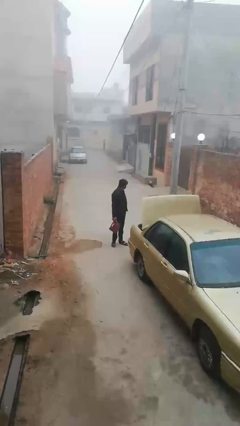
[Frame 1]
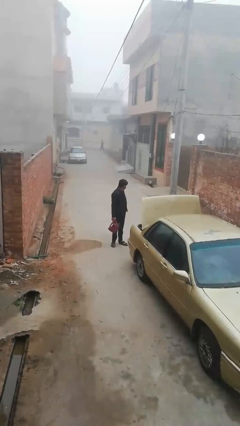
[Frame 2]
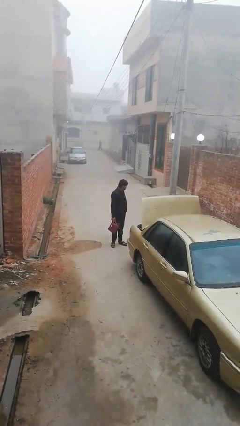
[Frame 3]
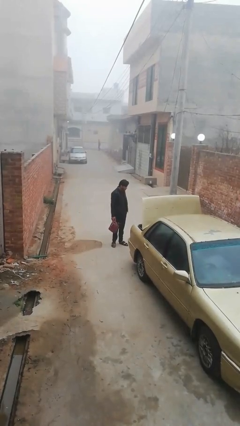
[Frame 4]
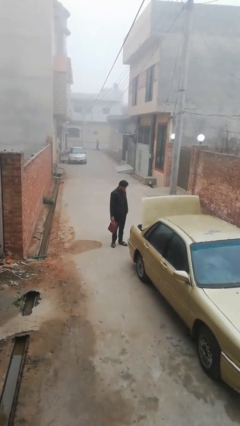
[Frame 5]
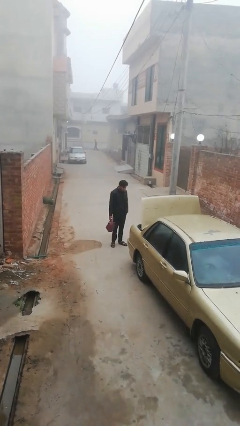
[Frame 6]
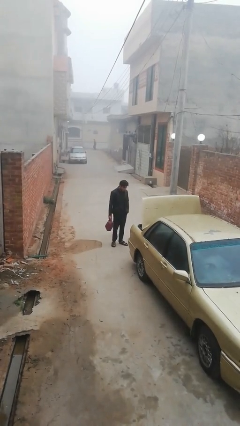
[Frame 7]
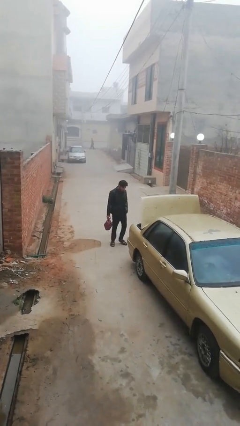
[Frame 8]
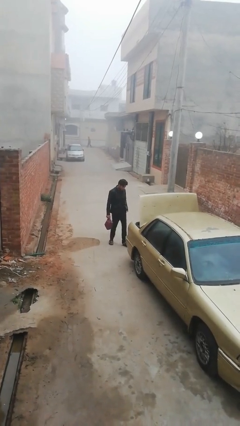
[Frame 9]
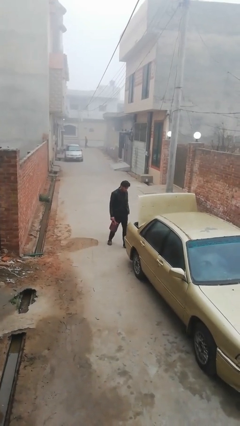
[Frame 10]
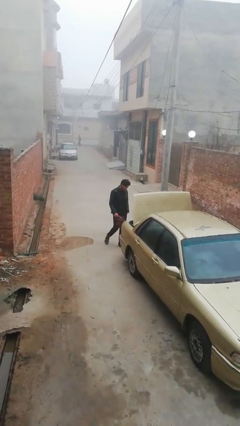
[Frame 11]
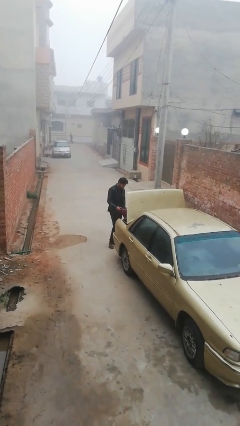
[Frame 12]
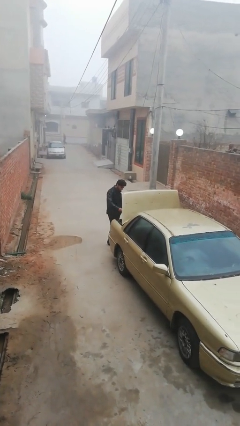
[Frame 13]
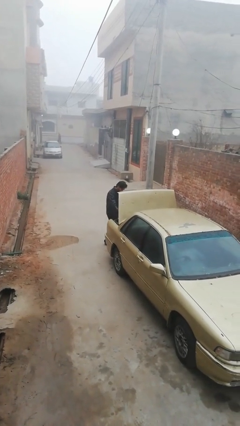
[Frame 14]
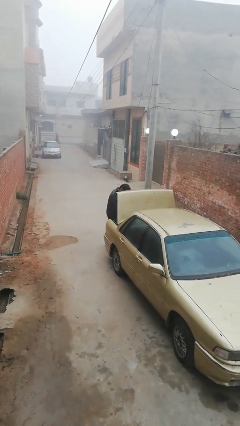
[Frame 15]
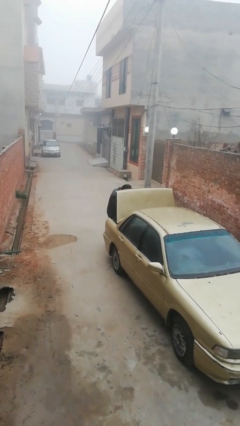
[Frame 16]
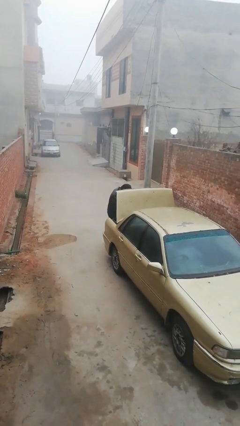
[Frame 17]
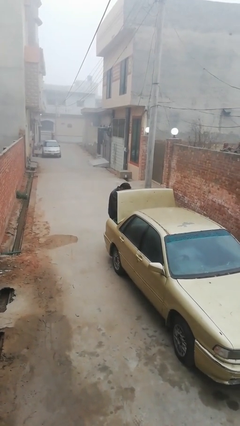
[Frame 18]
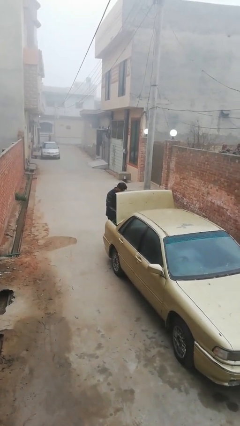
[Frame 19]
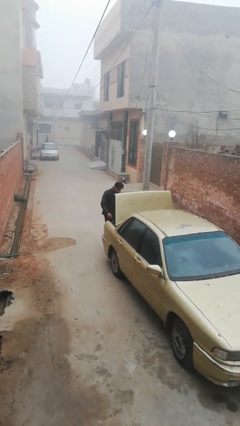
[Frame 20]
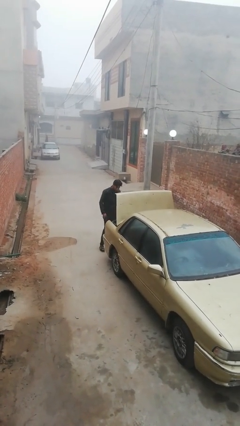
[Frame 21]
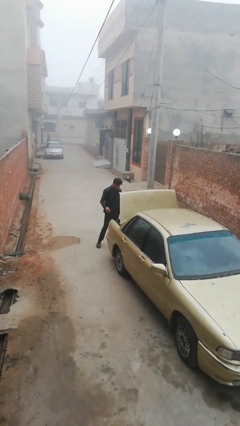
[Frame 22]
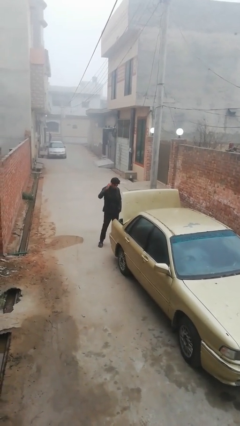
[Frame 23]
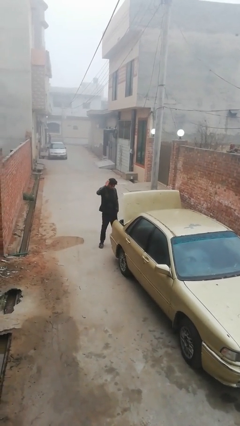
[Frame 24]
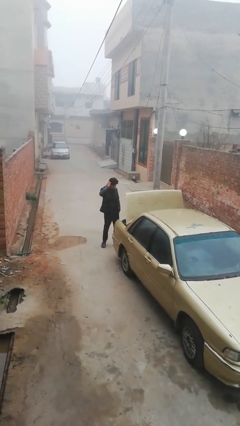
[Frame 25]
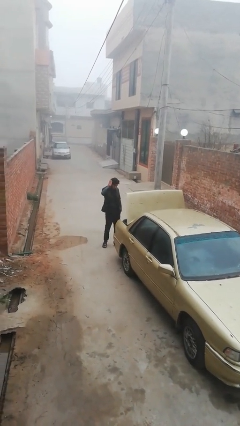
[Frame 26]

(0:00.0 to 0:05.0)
person loads car

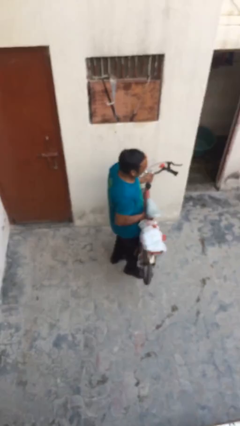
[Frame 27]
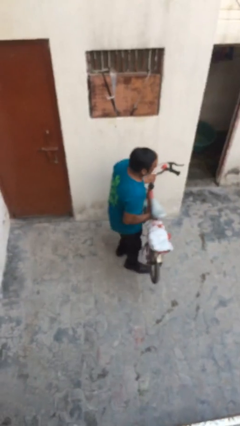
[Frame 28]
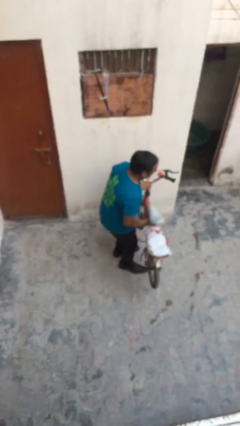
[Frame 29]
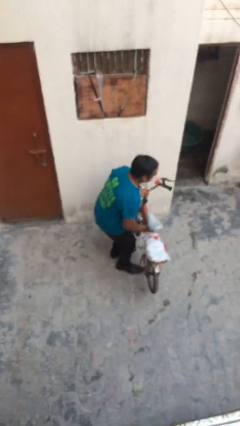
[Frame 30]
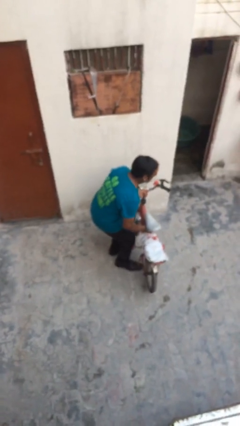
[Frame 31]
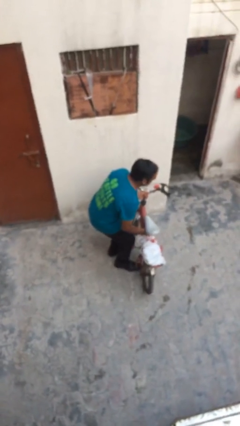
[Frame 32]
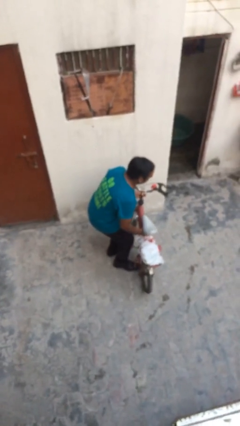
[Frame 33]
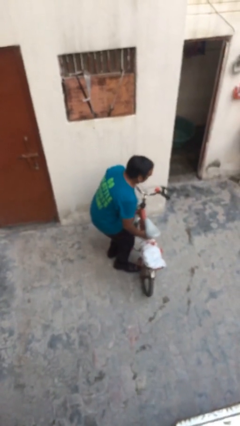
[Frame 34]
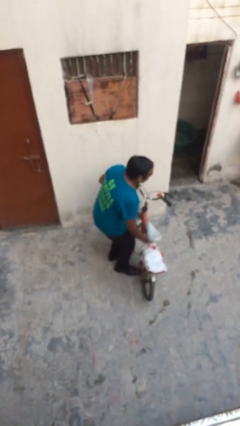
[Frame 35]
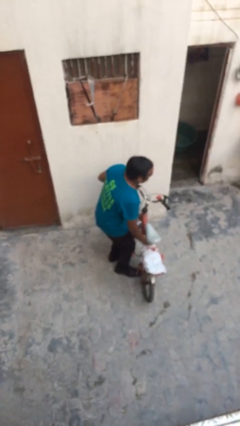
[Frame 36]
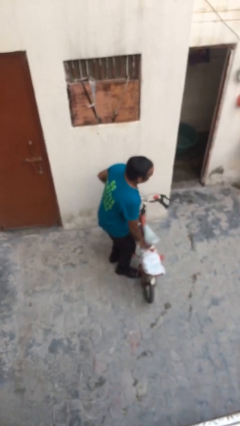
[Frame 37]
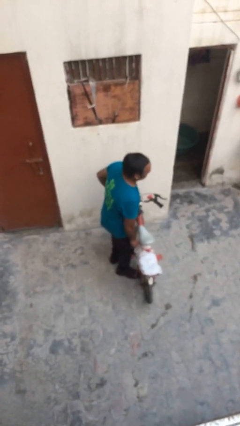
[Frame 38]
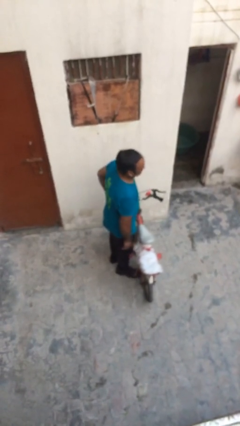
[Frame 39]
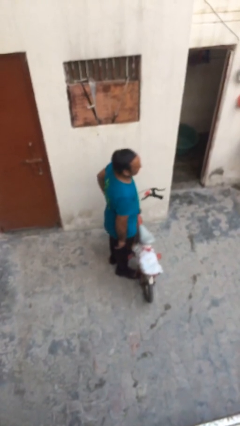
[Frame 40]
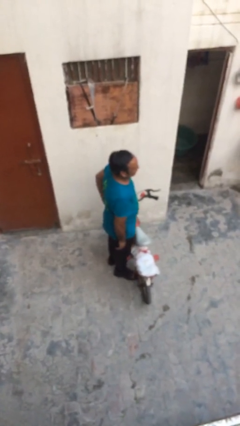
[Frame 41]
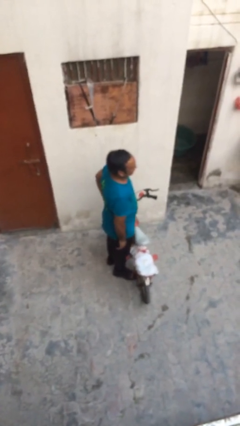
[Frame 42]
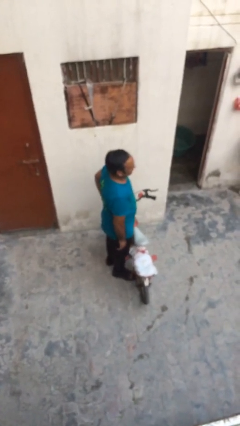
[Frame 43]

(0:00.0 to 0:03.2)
person puts down object on floor

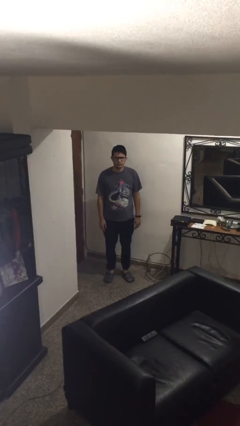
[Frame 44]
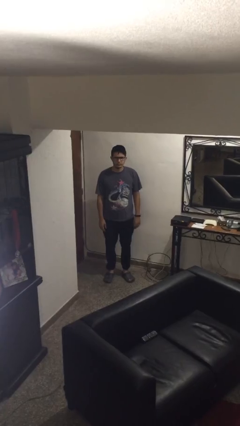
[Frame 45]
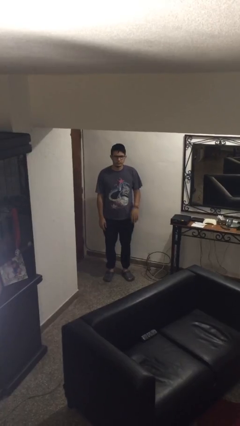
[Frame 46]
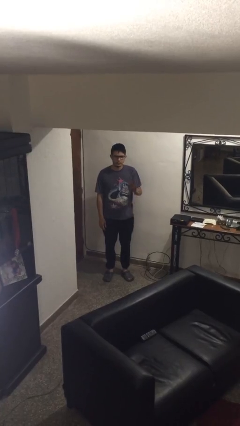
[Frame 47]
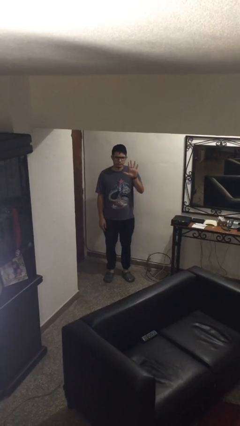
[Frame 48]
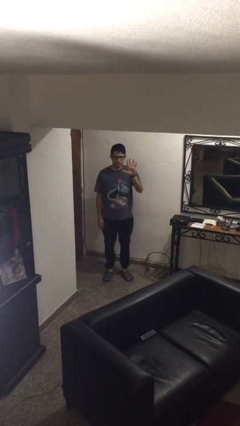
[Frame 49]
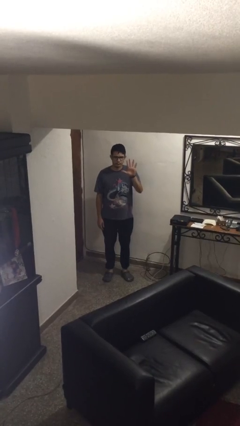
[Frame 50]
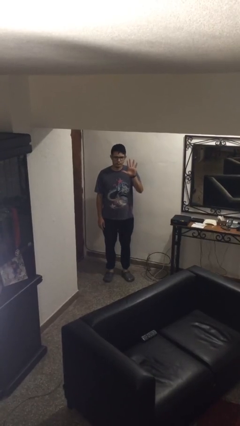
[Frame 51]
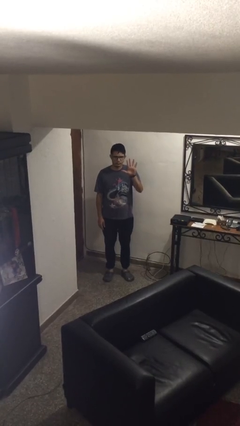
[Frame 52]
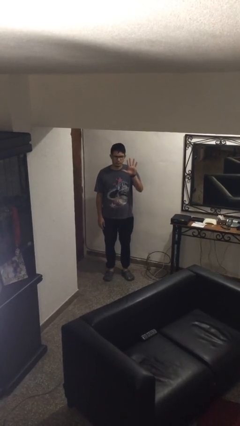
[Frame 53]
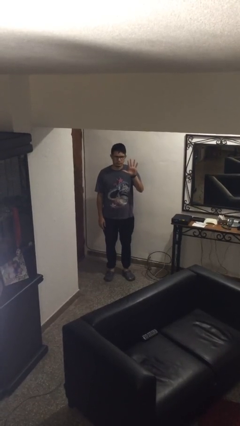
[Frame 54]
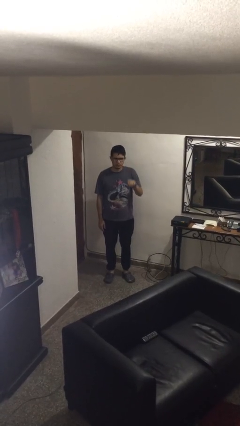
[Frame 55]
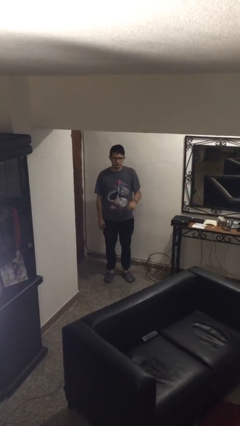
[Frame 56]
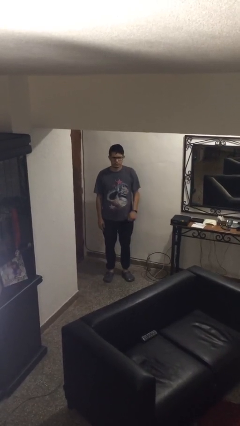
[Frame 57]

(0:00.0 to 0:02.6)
person gestures number five

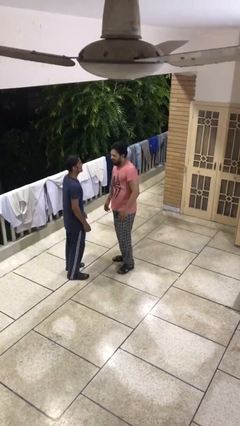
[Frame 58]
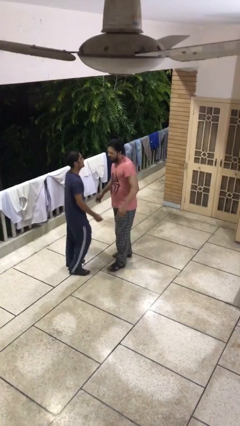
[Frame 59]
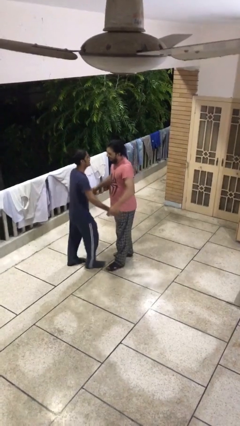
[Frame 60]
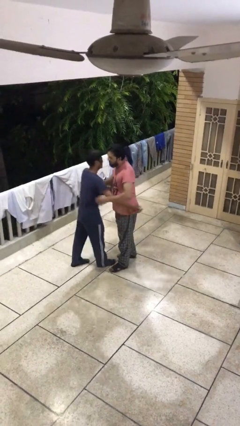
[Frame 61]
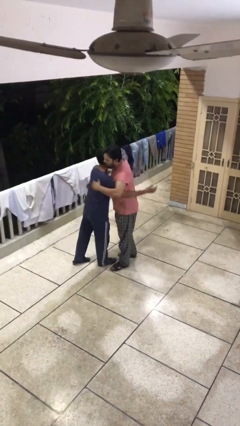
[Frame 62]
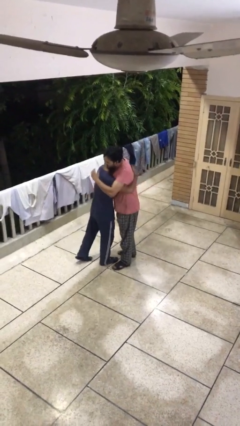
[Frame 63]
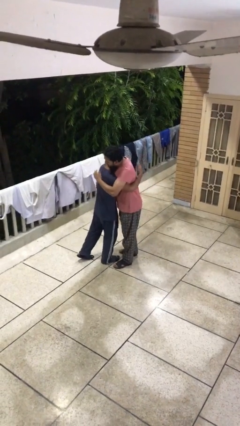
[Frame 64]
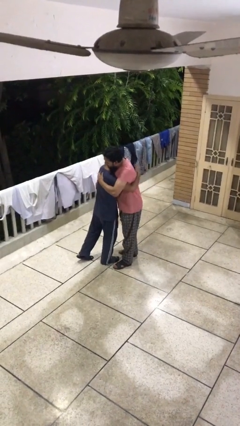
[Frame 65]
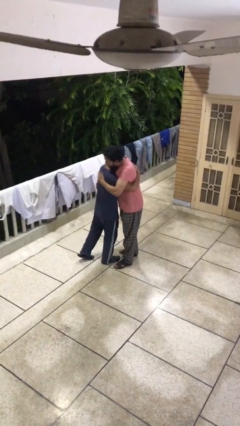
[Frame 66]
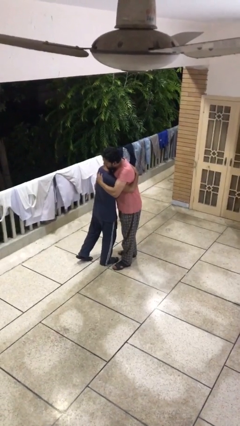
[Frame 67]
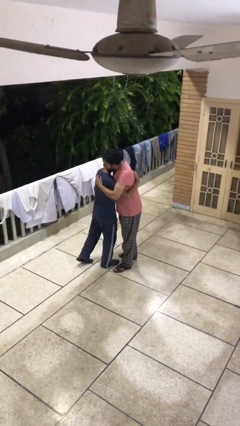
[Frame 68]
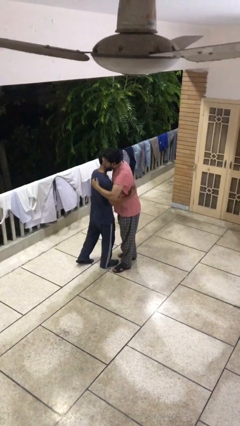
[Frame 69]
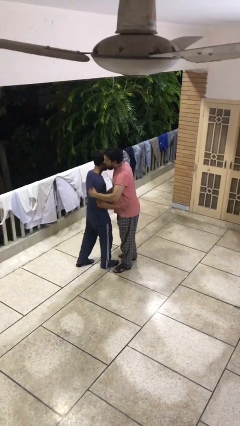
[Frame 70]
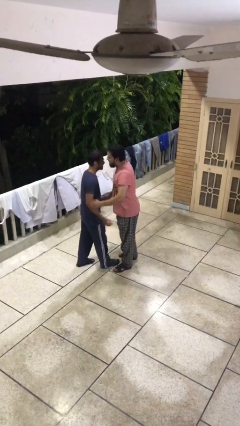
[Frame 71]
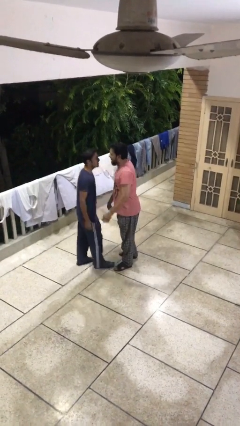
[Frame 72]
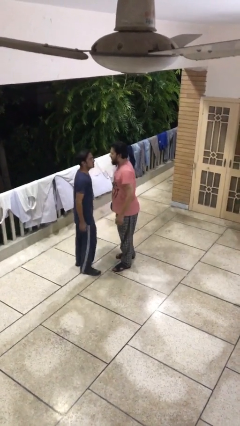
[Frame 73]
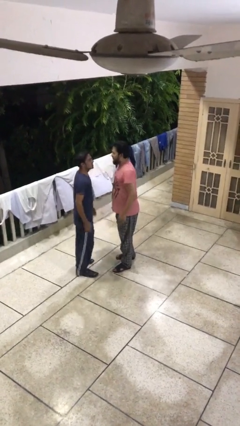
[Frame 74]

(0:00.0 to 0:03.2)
person embraces person

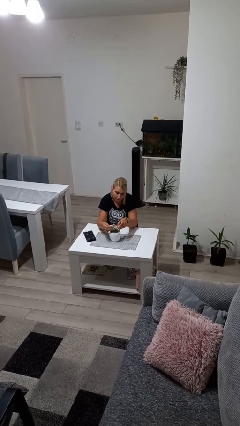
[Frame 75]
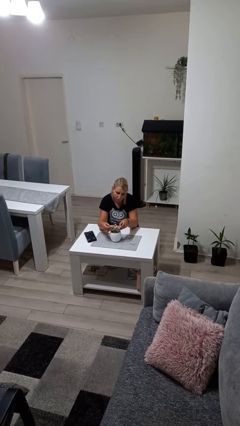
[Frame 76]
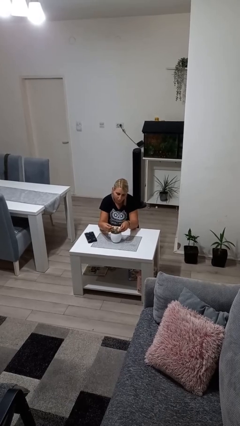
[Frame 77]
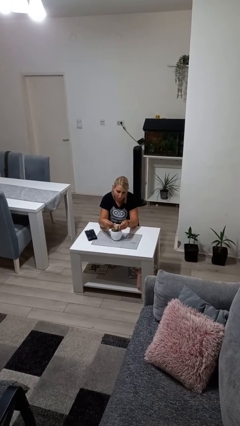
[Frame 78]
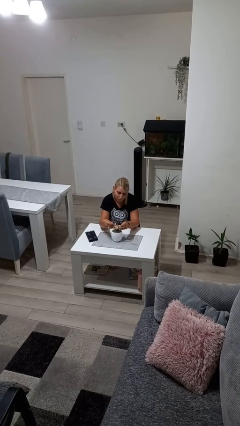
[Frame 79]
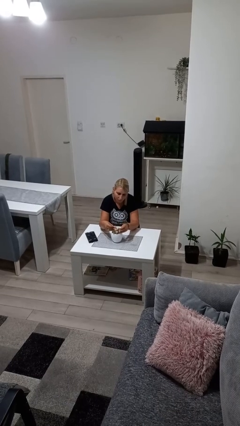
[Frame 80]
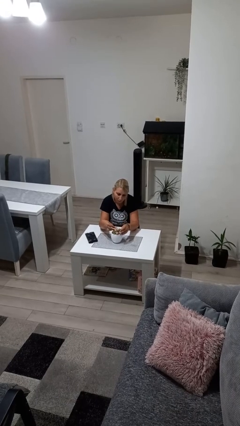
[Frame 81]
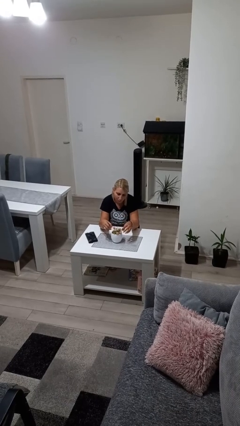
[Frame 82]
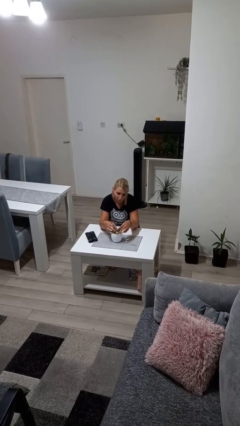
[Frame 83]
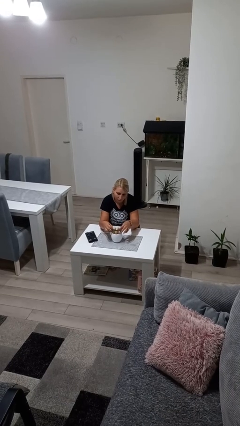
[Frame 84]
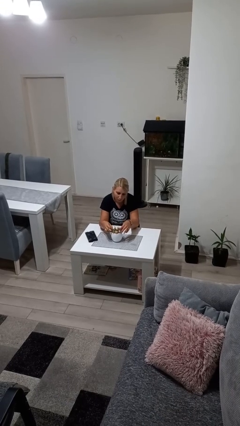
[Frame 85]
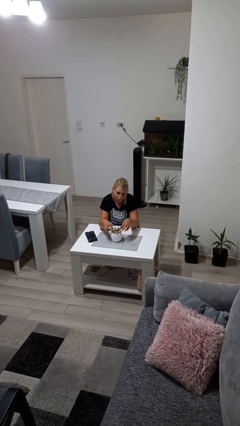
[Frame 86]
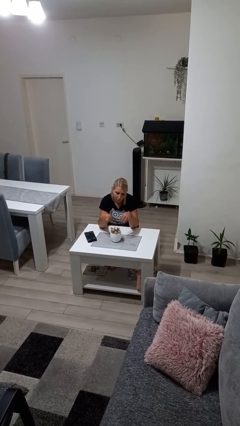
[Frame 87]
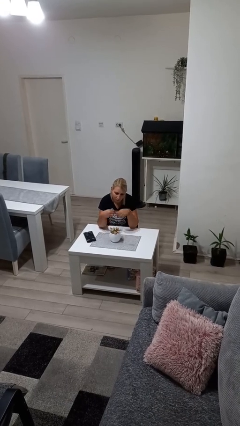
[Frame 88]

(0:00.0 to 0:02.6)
person arranges flowers in vase

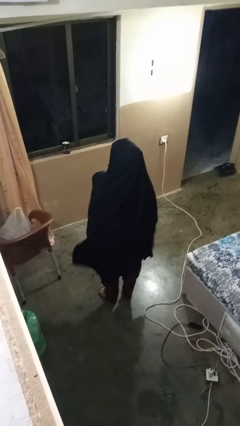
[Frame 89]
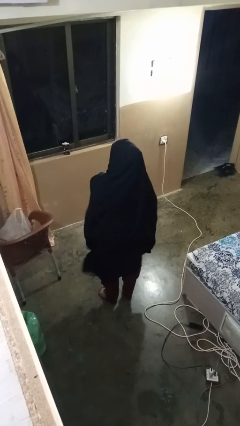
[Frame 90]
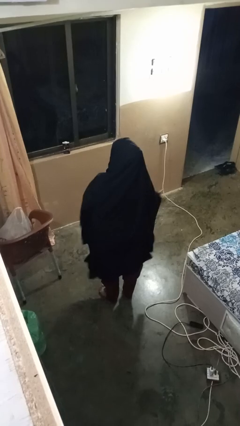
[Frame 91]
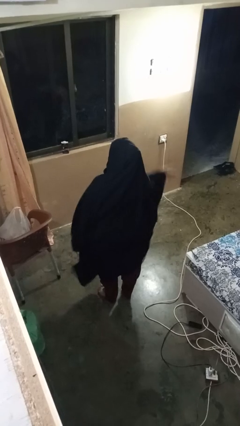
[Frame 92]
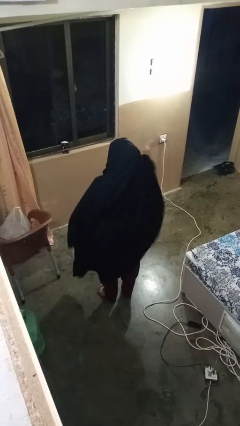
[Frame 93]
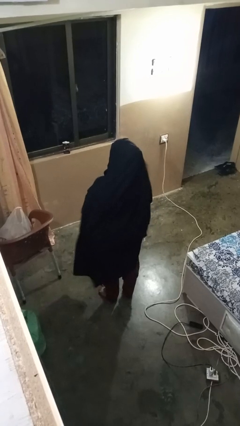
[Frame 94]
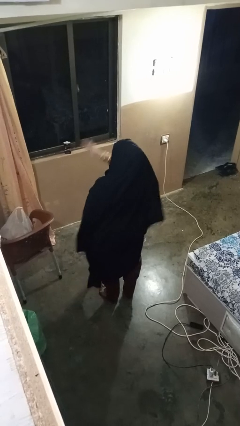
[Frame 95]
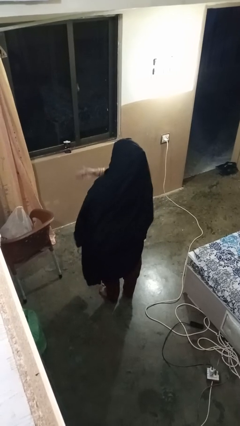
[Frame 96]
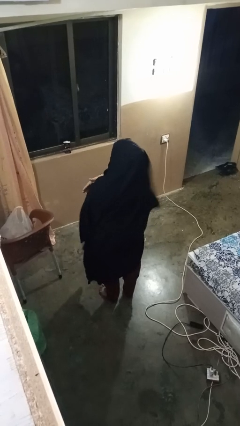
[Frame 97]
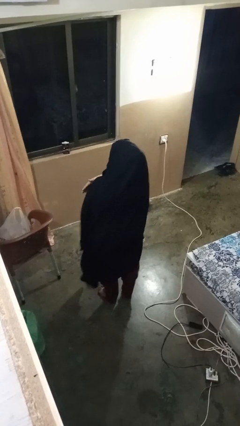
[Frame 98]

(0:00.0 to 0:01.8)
person gestures swipe left
